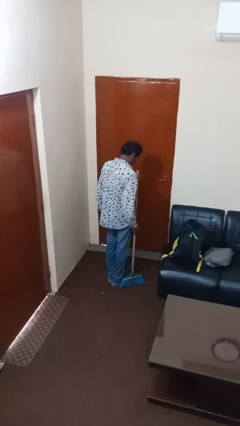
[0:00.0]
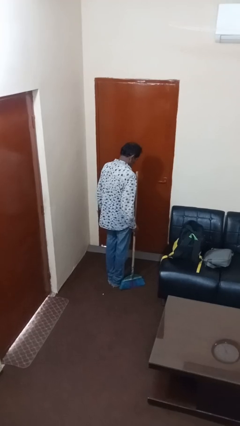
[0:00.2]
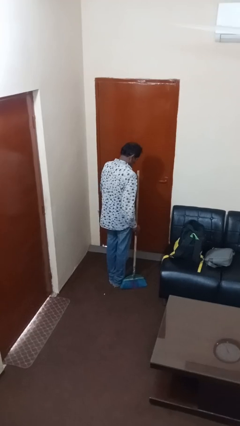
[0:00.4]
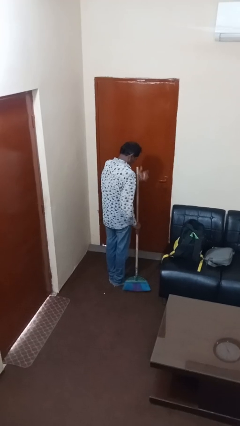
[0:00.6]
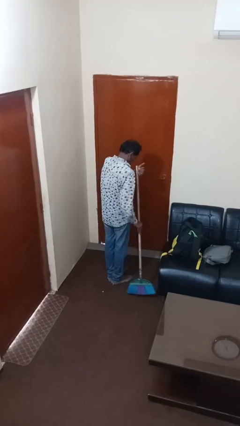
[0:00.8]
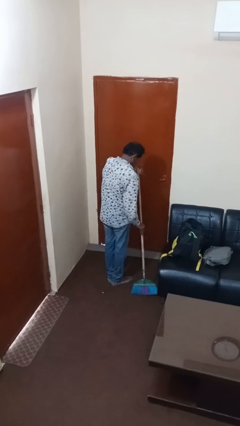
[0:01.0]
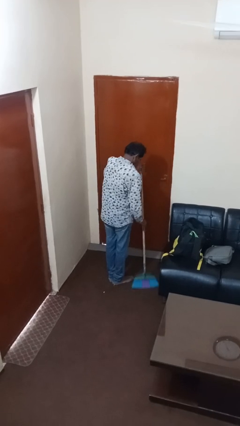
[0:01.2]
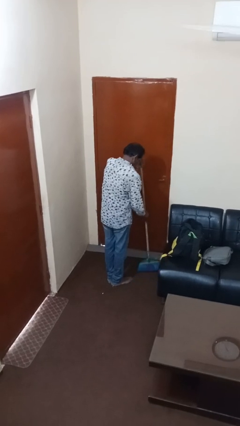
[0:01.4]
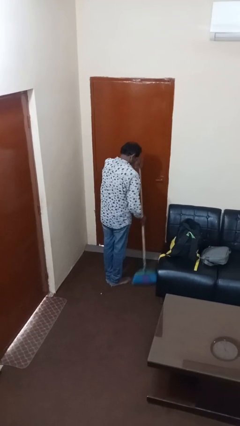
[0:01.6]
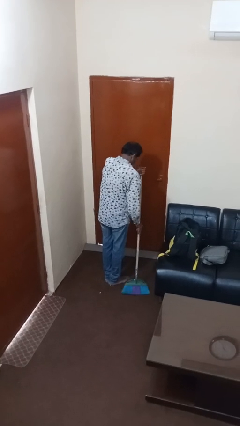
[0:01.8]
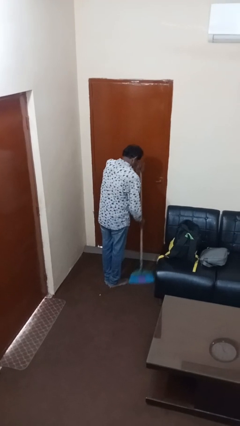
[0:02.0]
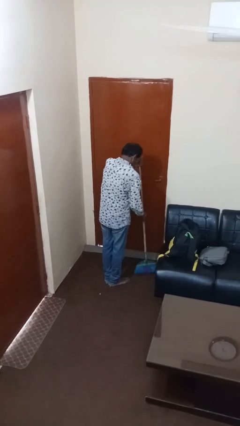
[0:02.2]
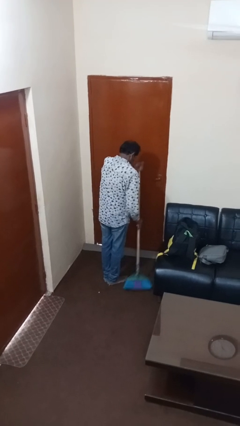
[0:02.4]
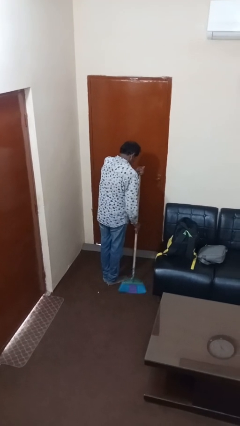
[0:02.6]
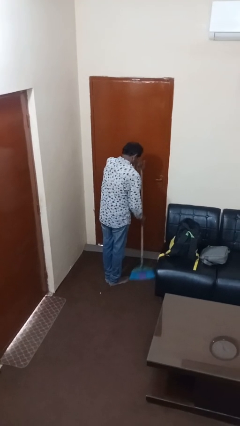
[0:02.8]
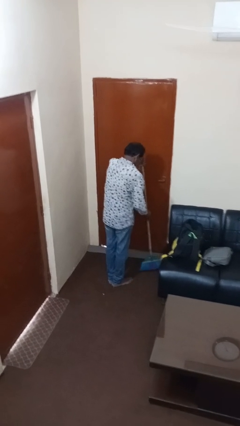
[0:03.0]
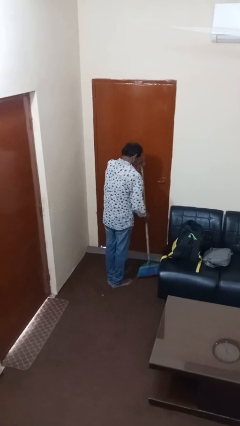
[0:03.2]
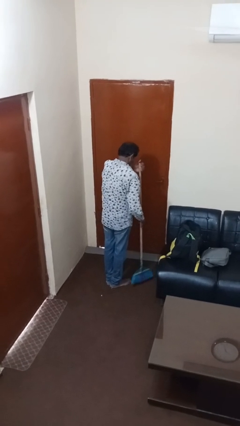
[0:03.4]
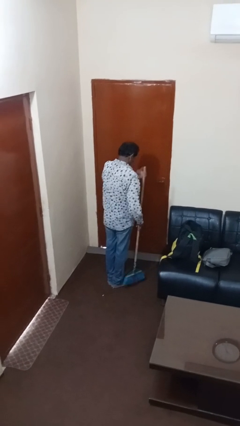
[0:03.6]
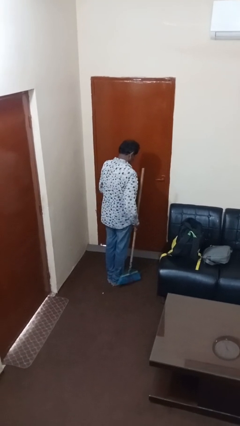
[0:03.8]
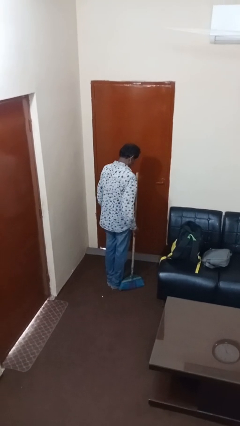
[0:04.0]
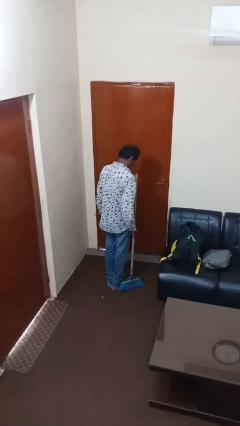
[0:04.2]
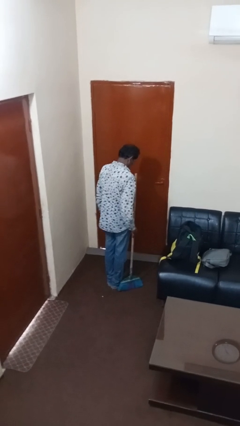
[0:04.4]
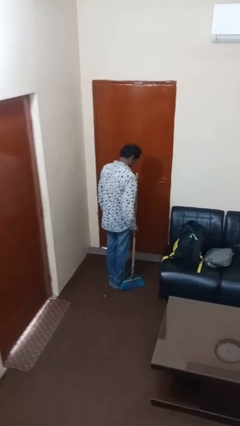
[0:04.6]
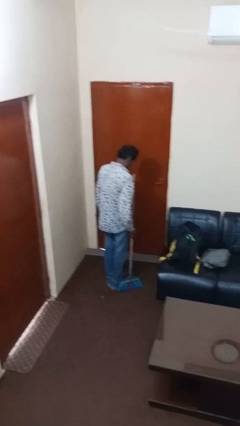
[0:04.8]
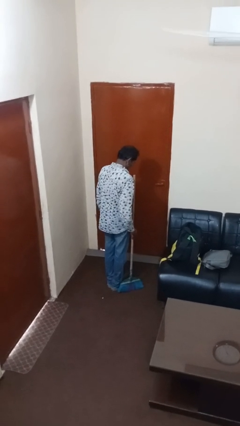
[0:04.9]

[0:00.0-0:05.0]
person sweeps floor

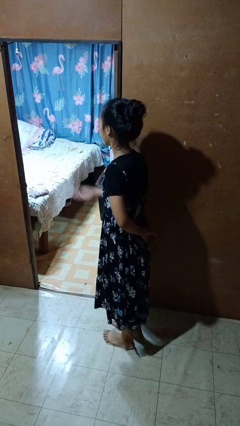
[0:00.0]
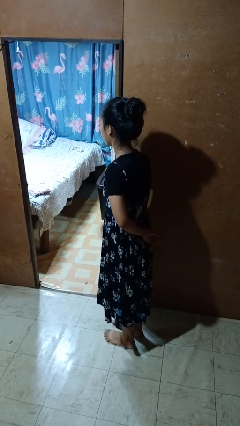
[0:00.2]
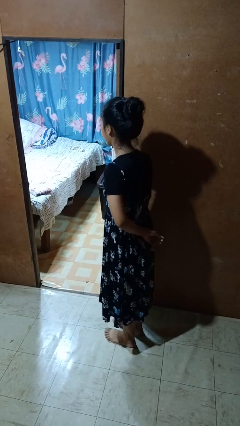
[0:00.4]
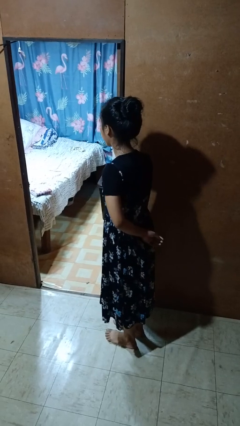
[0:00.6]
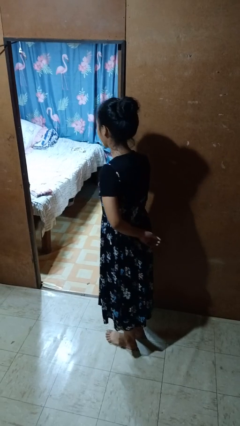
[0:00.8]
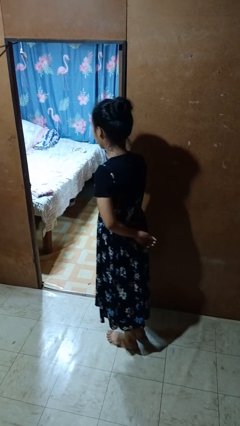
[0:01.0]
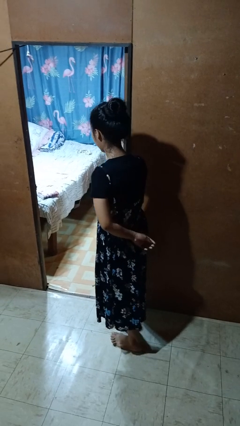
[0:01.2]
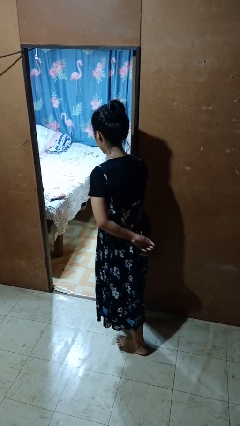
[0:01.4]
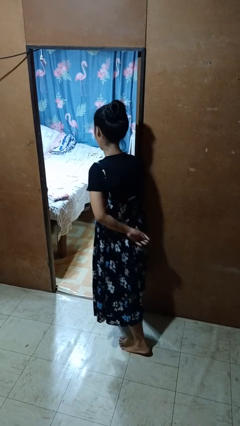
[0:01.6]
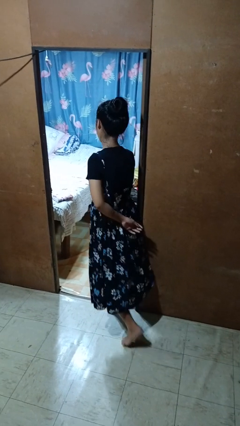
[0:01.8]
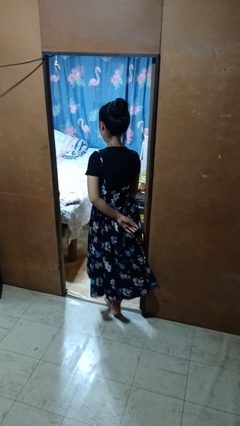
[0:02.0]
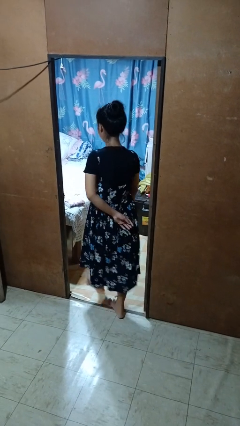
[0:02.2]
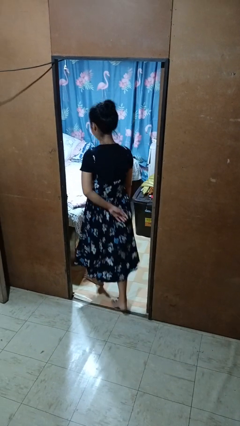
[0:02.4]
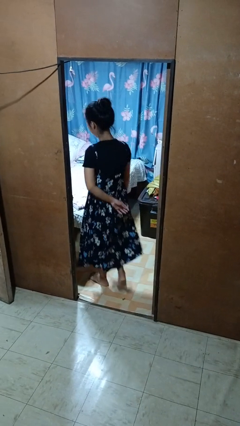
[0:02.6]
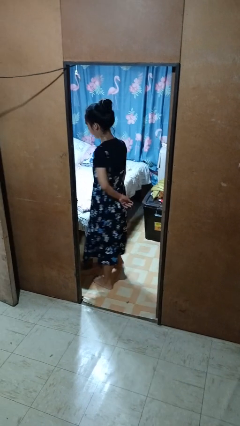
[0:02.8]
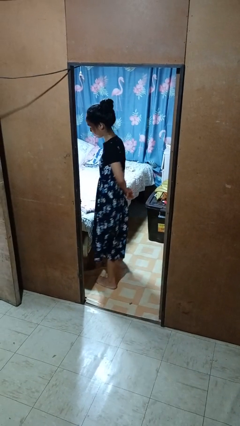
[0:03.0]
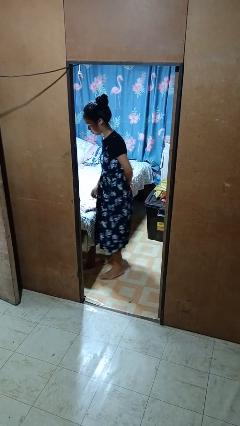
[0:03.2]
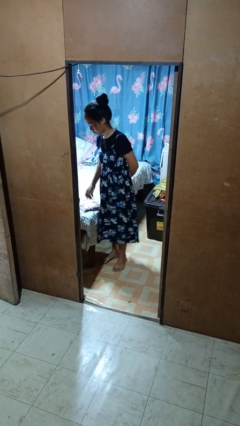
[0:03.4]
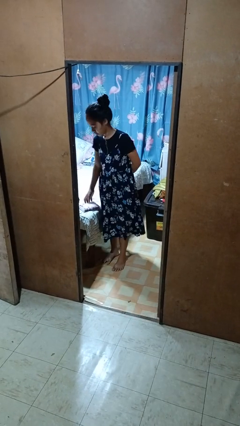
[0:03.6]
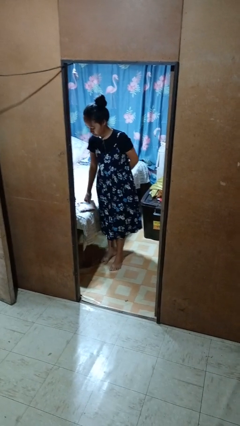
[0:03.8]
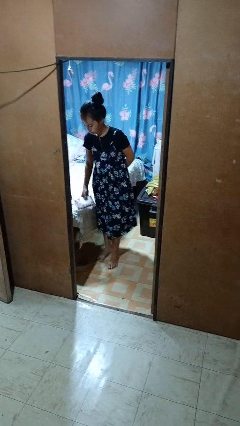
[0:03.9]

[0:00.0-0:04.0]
person throws object on bed

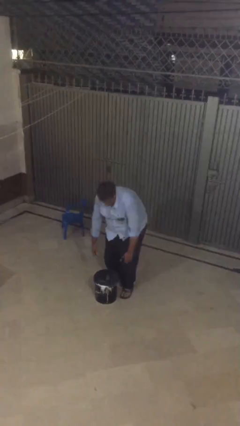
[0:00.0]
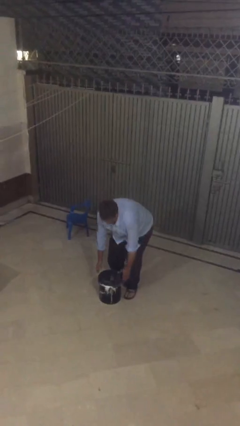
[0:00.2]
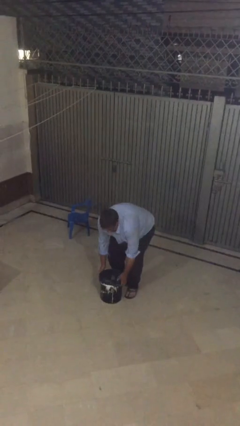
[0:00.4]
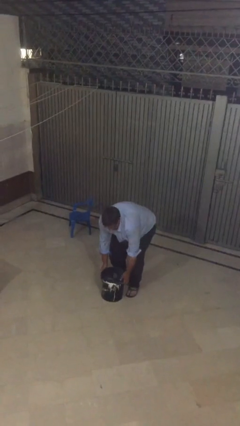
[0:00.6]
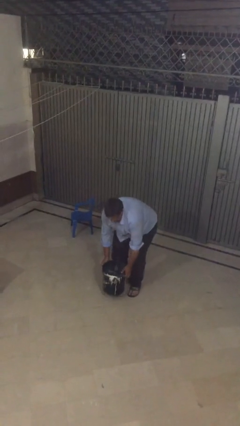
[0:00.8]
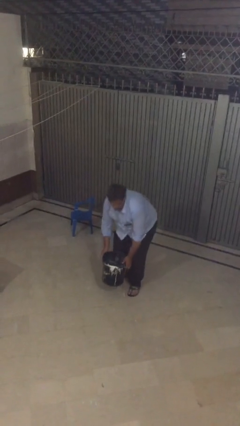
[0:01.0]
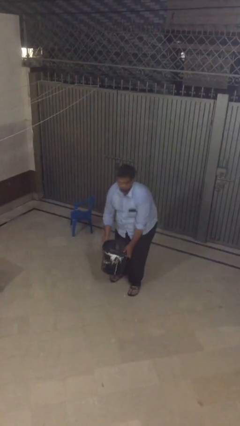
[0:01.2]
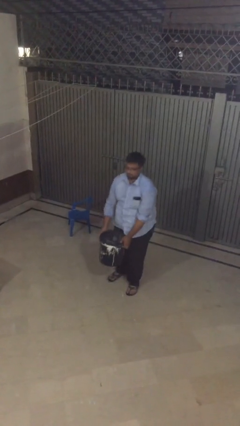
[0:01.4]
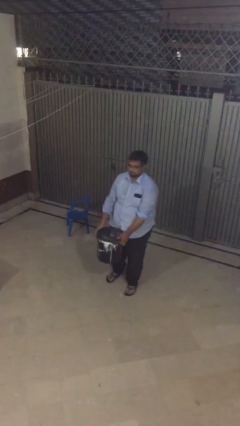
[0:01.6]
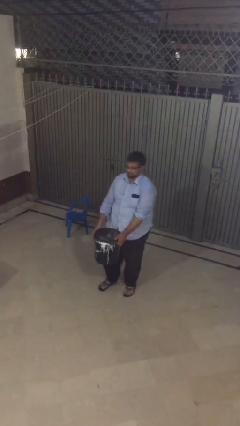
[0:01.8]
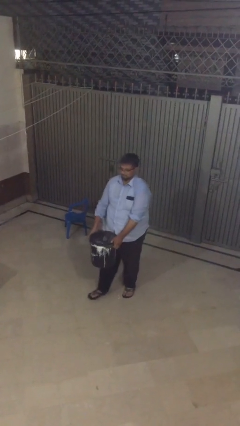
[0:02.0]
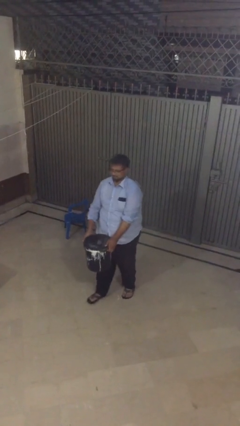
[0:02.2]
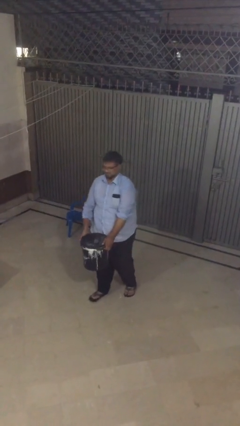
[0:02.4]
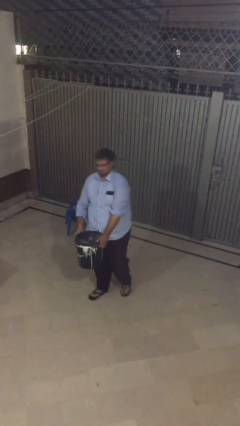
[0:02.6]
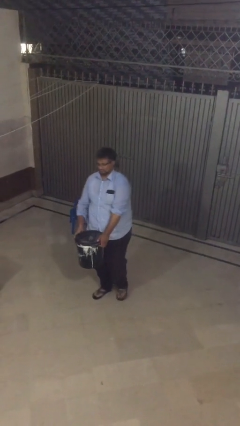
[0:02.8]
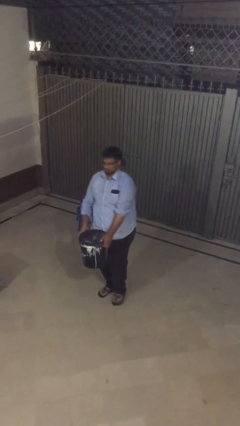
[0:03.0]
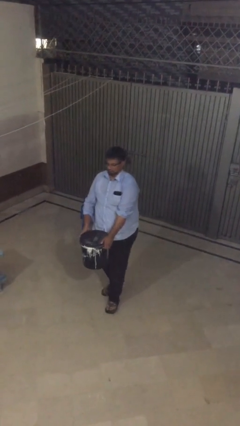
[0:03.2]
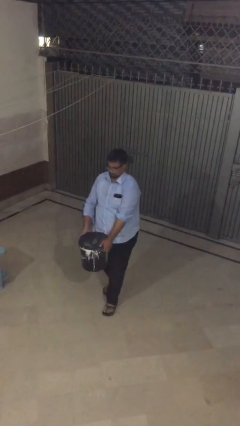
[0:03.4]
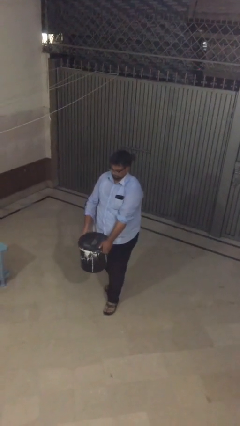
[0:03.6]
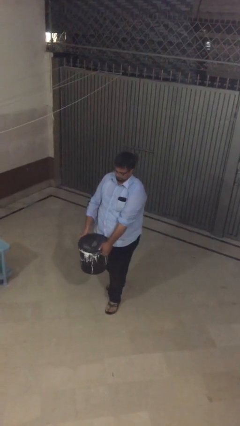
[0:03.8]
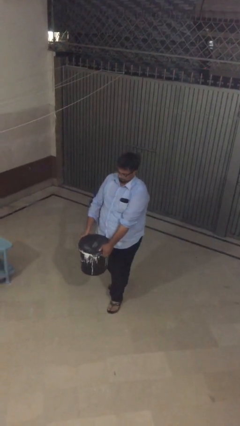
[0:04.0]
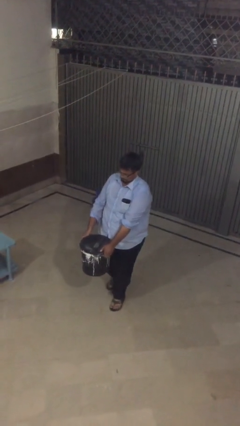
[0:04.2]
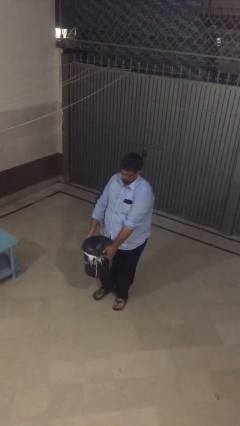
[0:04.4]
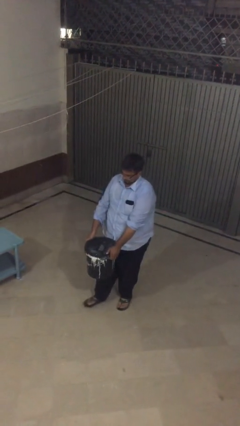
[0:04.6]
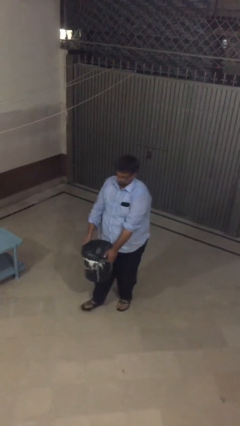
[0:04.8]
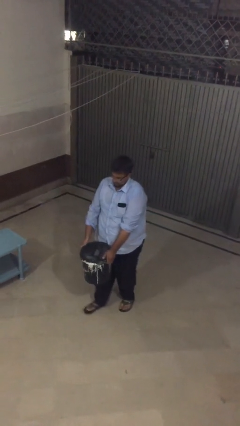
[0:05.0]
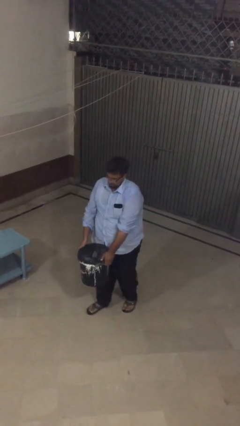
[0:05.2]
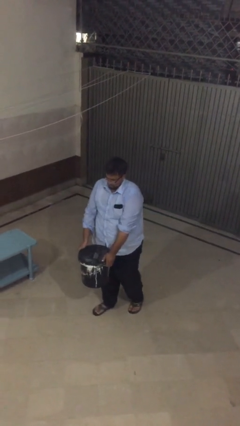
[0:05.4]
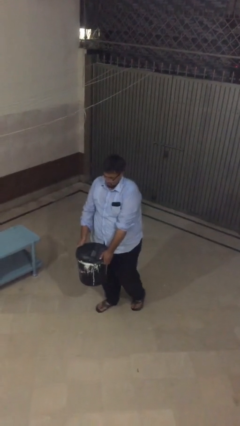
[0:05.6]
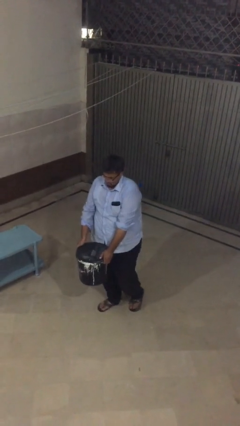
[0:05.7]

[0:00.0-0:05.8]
person carries heavy object

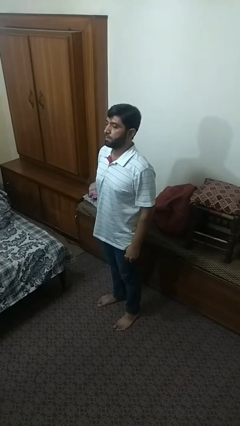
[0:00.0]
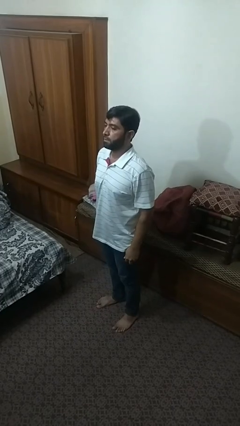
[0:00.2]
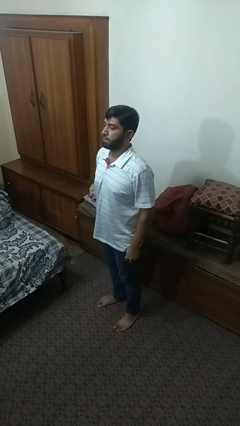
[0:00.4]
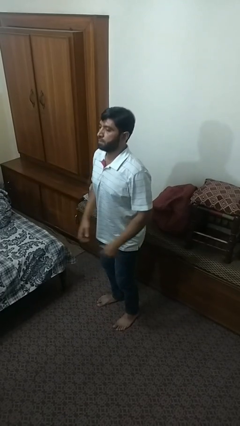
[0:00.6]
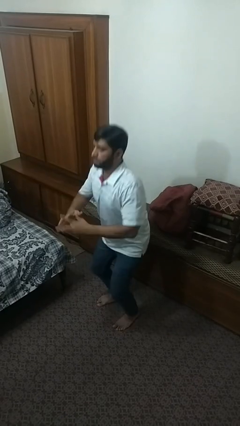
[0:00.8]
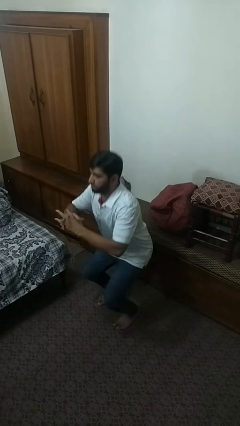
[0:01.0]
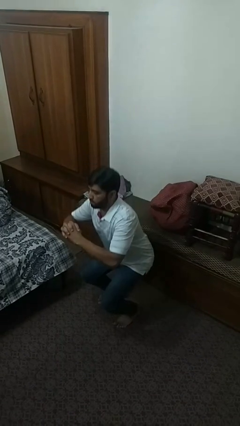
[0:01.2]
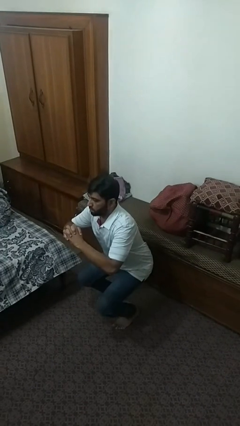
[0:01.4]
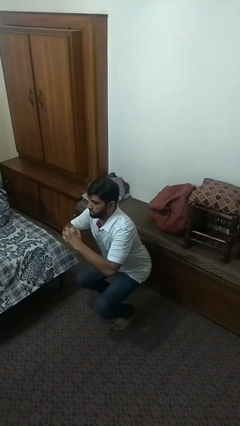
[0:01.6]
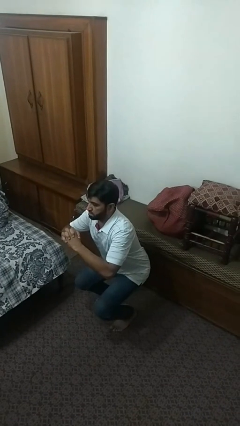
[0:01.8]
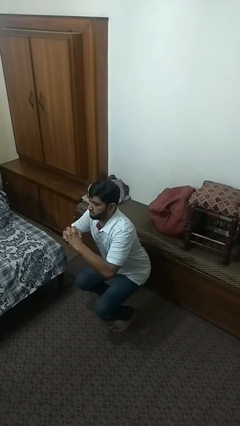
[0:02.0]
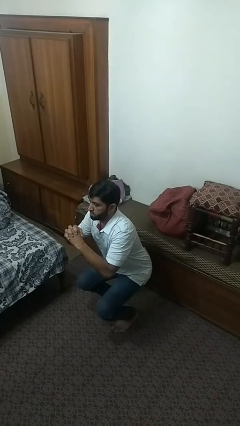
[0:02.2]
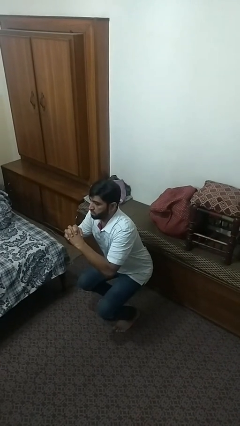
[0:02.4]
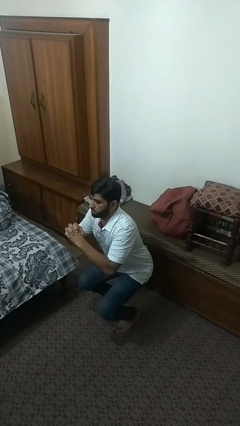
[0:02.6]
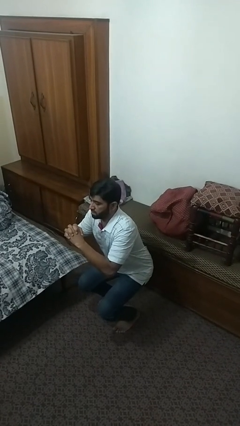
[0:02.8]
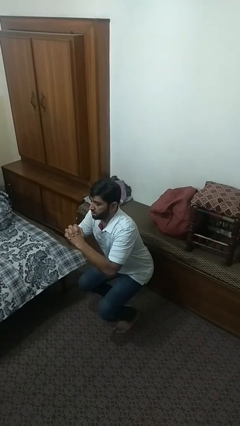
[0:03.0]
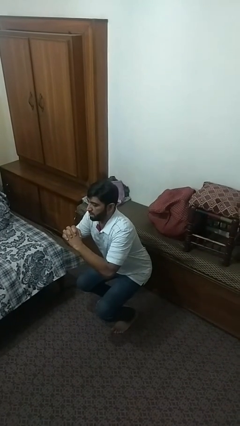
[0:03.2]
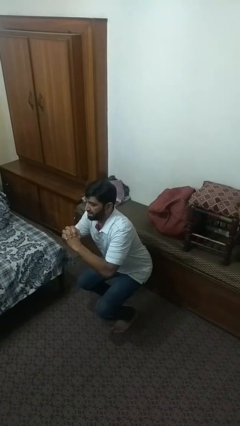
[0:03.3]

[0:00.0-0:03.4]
person squats
